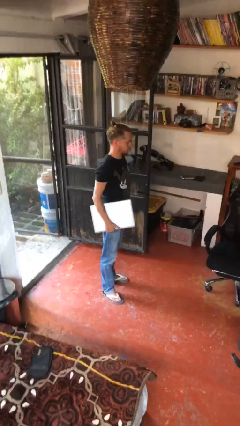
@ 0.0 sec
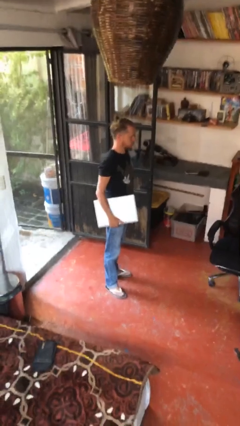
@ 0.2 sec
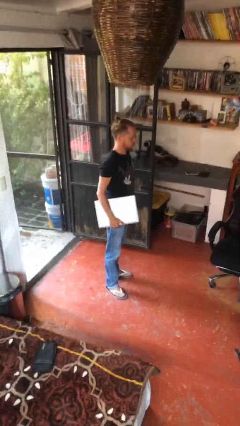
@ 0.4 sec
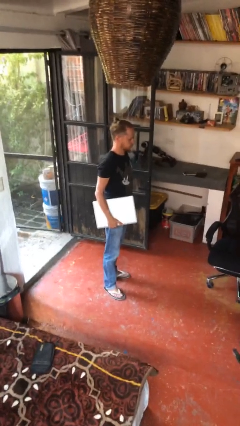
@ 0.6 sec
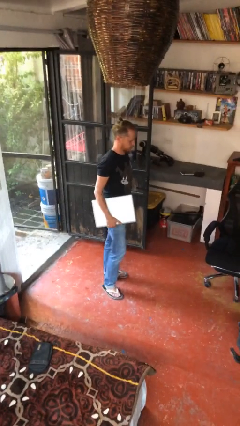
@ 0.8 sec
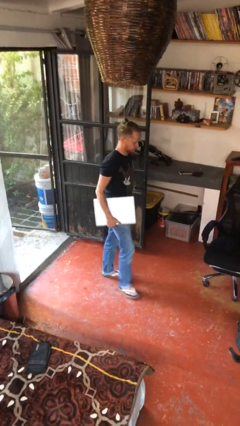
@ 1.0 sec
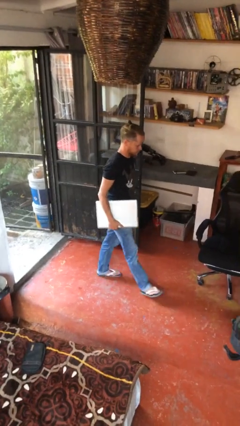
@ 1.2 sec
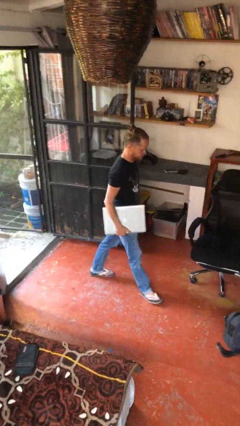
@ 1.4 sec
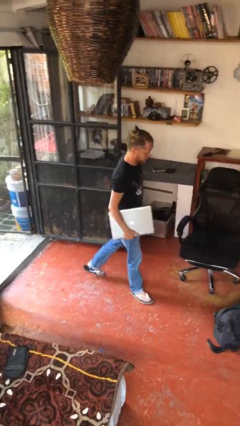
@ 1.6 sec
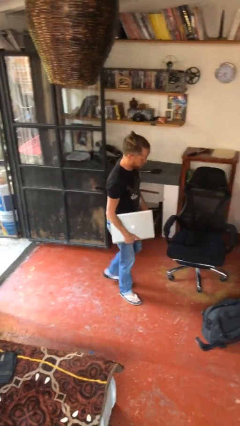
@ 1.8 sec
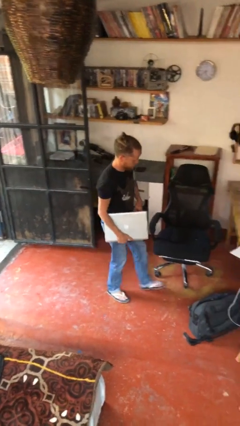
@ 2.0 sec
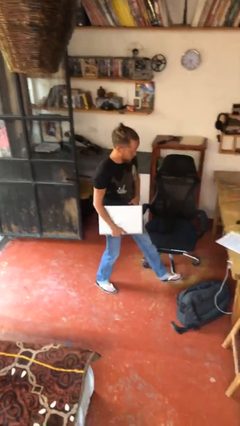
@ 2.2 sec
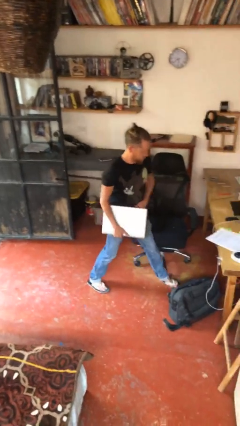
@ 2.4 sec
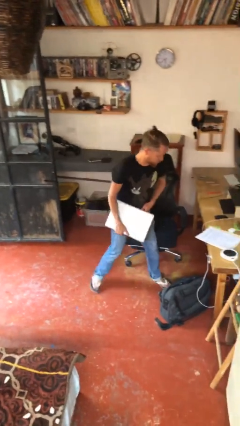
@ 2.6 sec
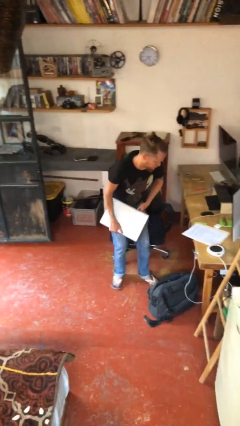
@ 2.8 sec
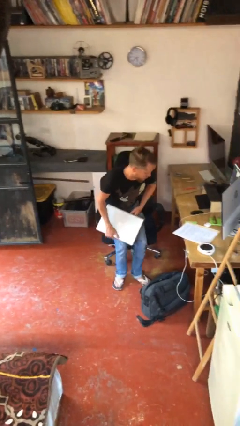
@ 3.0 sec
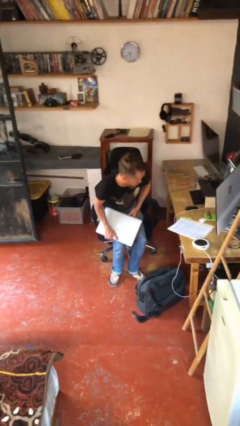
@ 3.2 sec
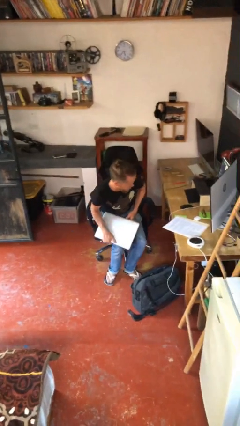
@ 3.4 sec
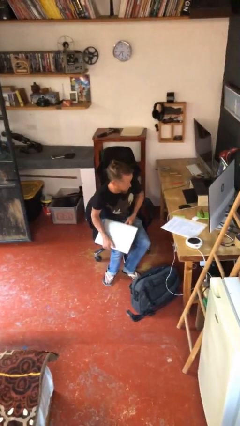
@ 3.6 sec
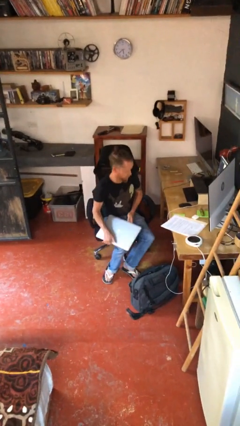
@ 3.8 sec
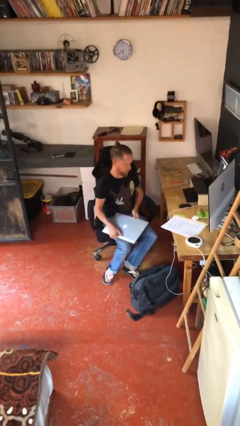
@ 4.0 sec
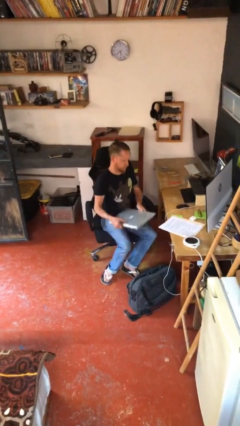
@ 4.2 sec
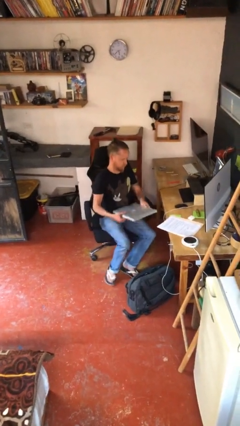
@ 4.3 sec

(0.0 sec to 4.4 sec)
person sits down

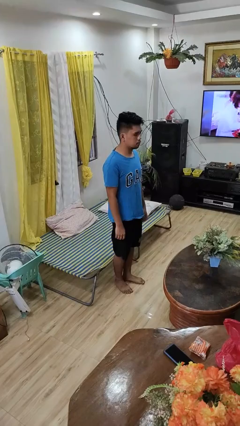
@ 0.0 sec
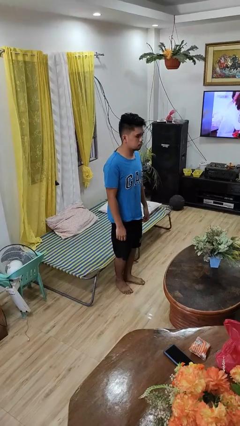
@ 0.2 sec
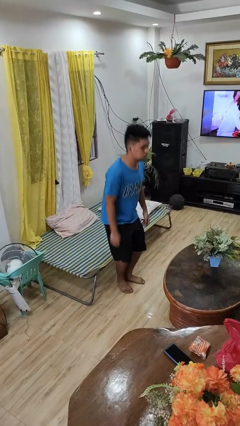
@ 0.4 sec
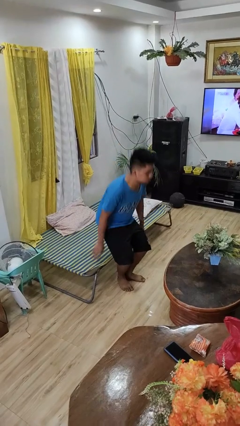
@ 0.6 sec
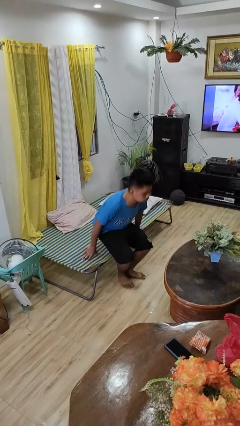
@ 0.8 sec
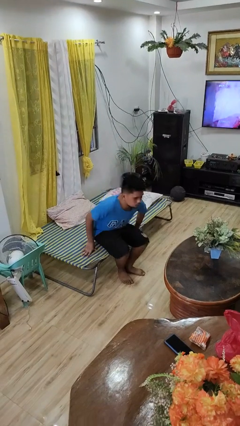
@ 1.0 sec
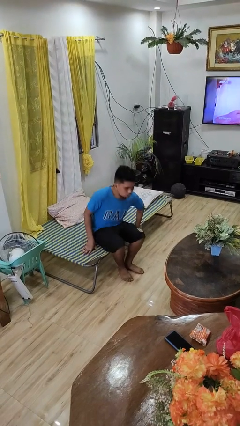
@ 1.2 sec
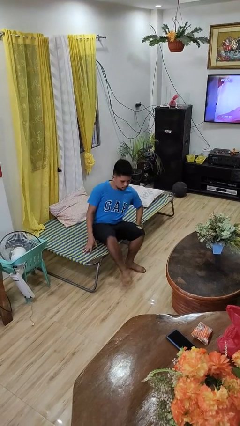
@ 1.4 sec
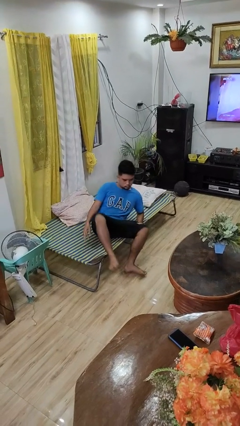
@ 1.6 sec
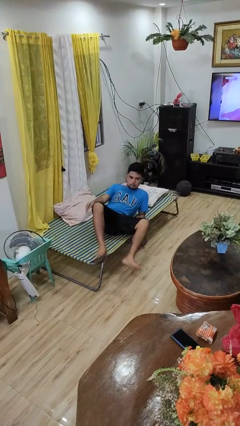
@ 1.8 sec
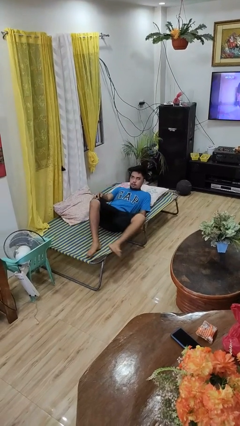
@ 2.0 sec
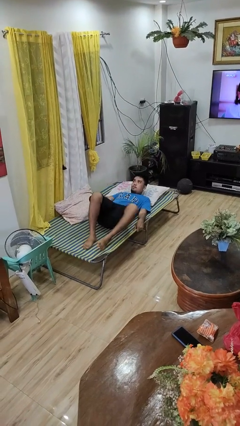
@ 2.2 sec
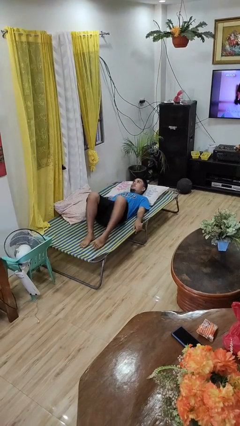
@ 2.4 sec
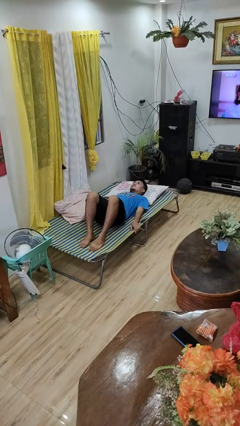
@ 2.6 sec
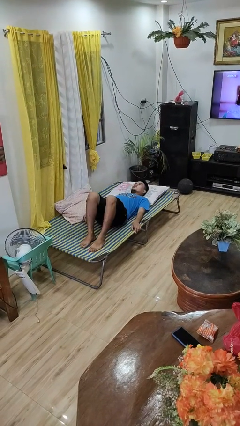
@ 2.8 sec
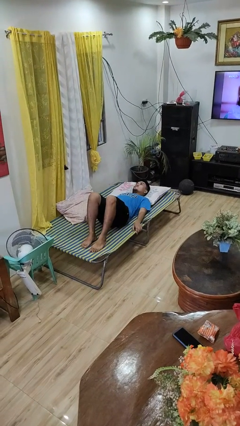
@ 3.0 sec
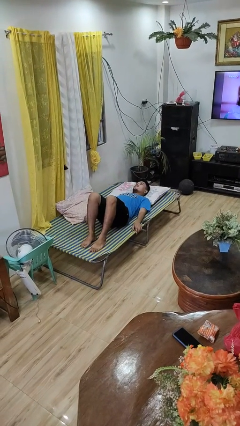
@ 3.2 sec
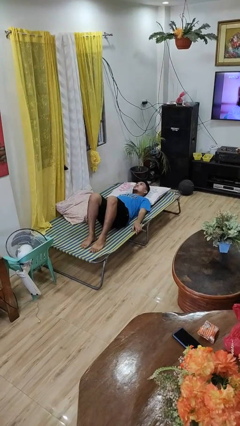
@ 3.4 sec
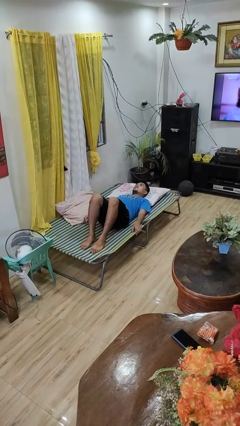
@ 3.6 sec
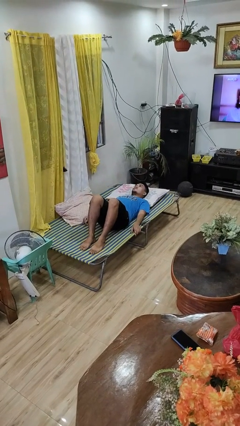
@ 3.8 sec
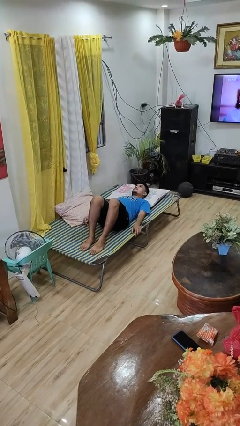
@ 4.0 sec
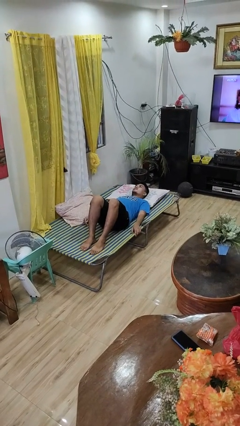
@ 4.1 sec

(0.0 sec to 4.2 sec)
person lies down on bed

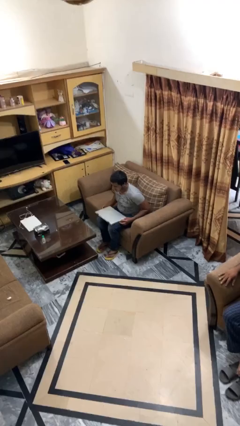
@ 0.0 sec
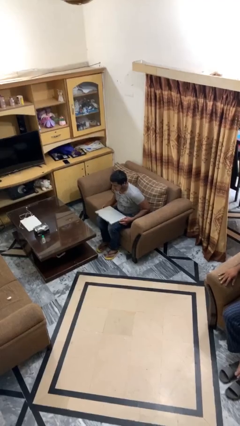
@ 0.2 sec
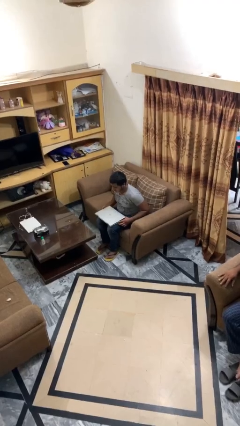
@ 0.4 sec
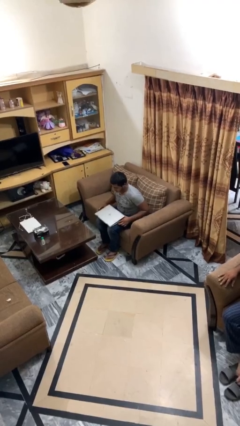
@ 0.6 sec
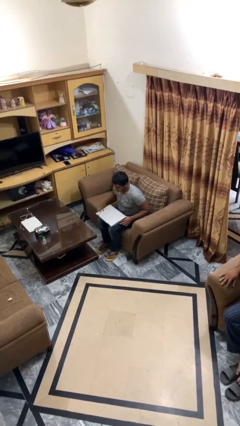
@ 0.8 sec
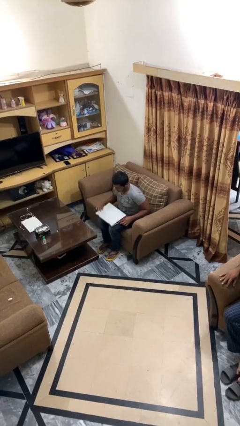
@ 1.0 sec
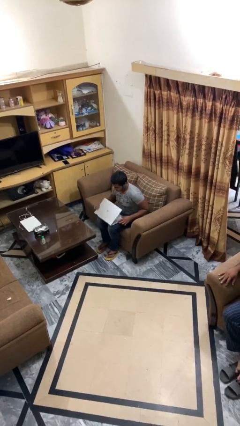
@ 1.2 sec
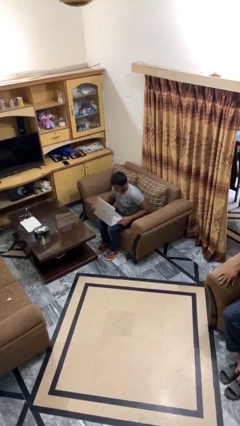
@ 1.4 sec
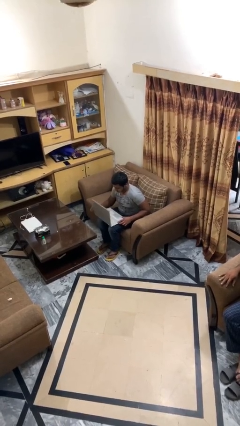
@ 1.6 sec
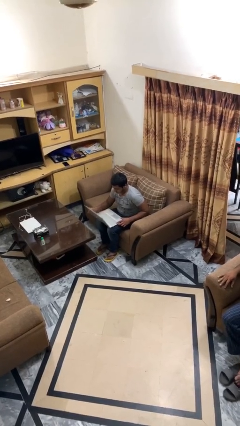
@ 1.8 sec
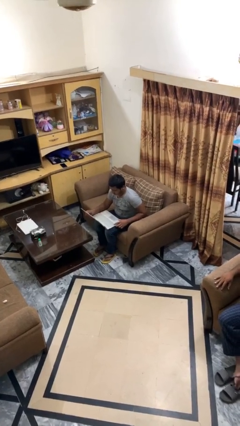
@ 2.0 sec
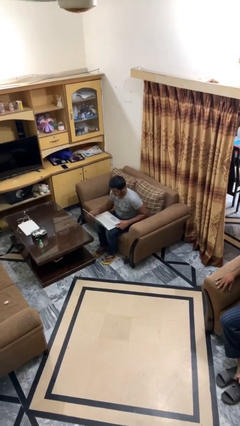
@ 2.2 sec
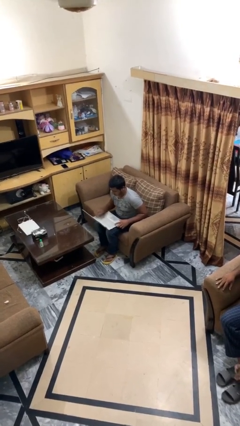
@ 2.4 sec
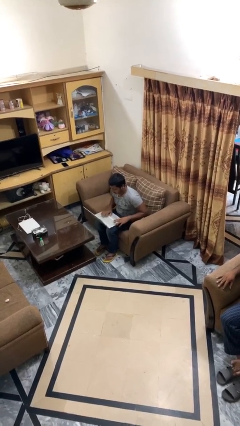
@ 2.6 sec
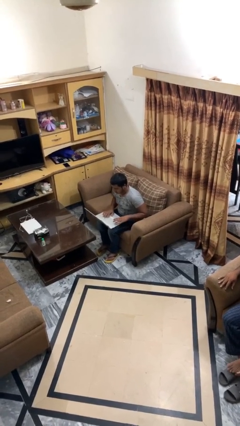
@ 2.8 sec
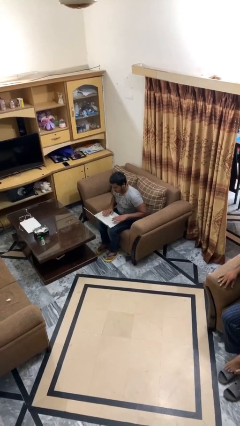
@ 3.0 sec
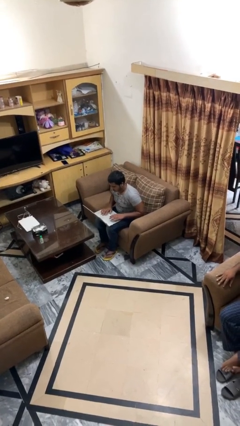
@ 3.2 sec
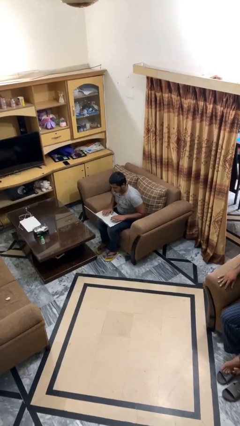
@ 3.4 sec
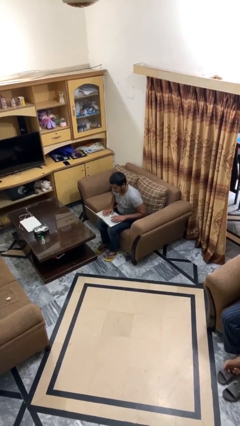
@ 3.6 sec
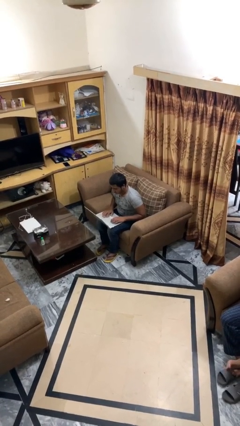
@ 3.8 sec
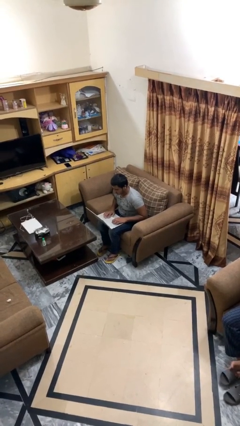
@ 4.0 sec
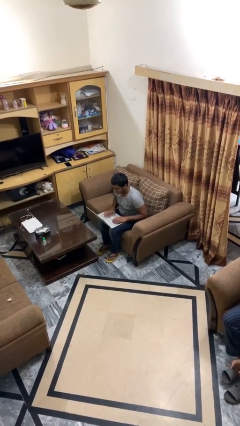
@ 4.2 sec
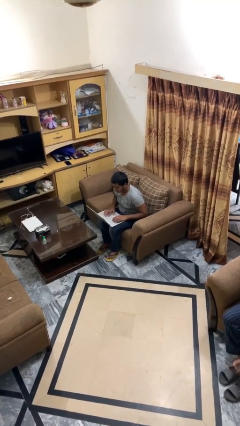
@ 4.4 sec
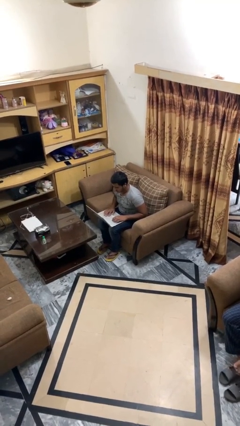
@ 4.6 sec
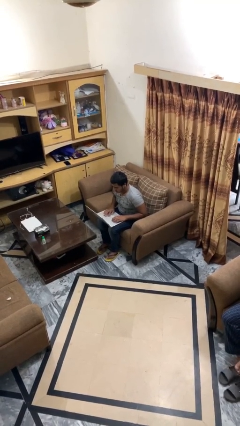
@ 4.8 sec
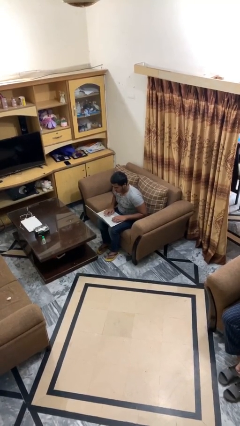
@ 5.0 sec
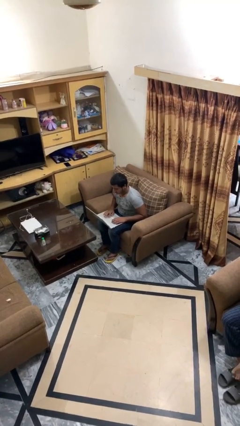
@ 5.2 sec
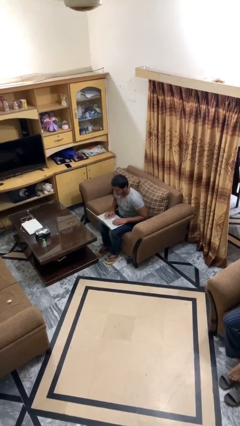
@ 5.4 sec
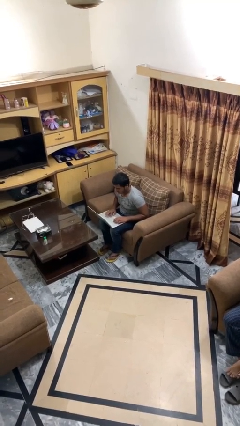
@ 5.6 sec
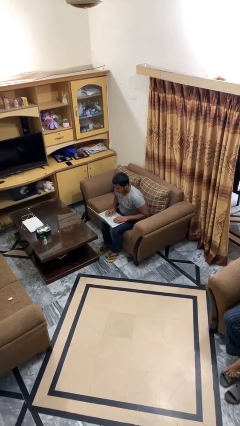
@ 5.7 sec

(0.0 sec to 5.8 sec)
person interacts with laptop

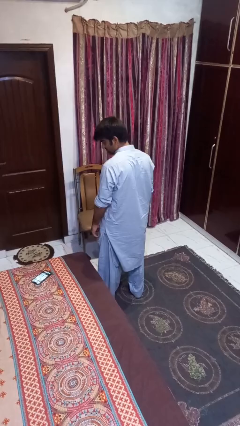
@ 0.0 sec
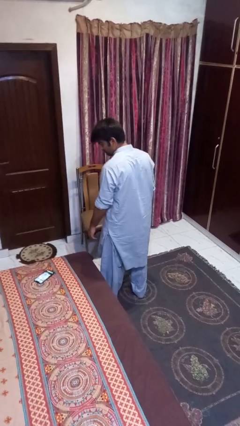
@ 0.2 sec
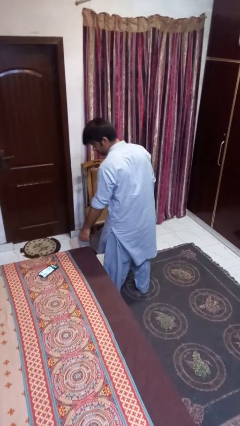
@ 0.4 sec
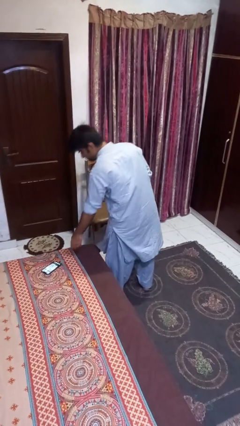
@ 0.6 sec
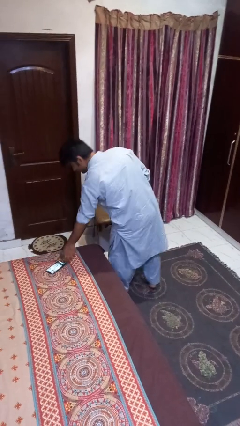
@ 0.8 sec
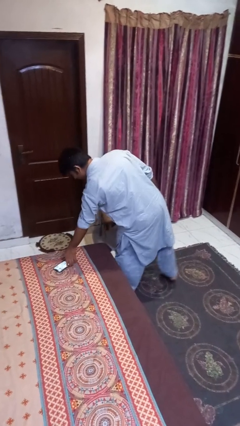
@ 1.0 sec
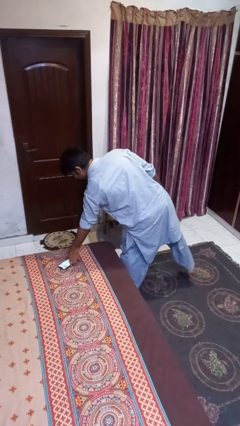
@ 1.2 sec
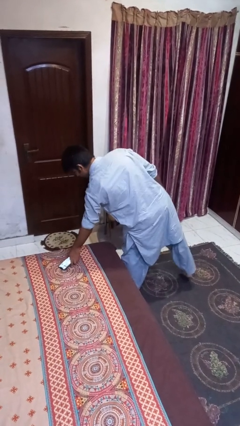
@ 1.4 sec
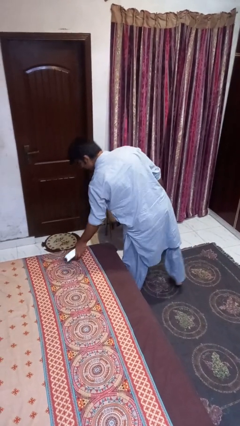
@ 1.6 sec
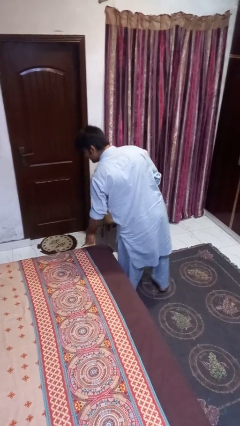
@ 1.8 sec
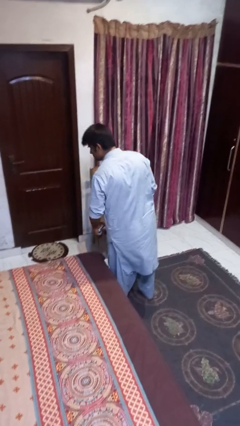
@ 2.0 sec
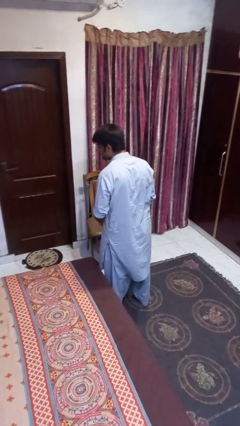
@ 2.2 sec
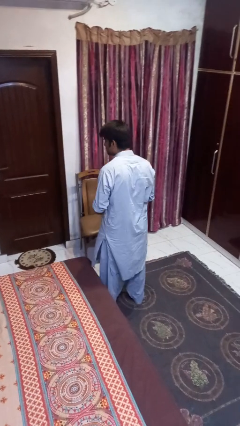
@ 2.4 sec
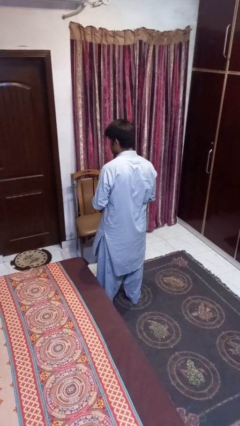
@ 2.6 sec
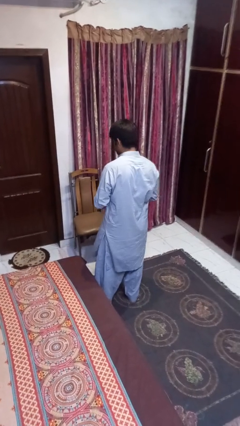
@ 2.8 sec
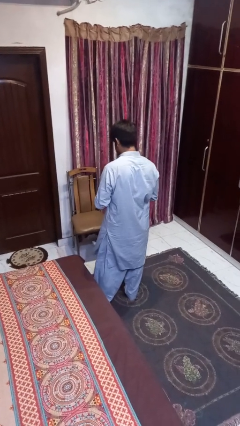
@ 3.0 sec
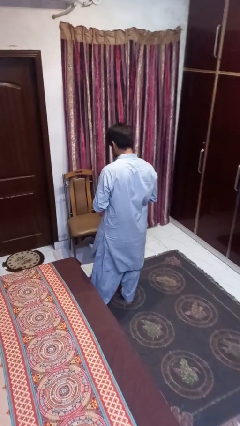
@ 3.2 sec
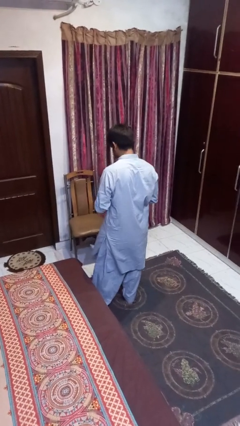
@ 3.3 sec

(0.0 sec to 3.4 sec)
person picks up object from bed
